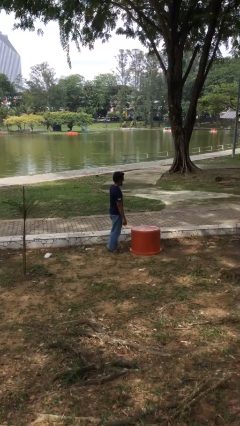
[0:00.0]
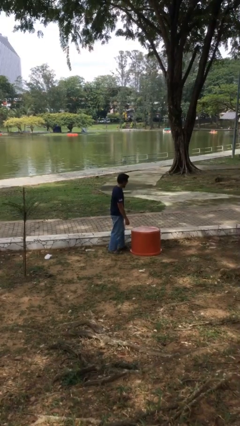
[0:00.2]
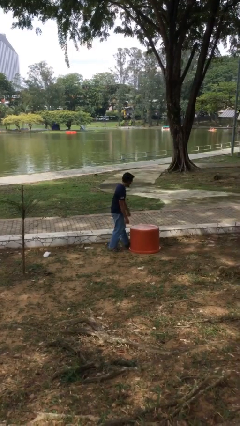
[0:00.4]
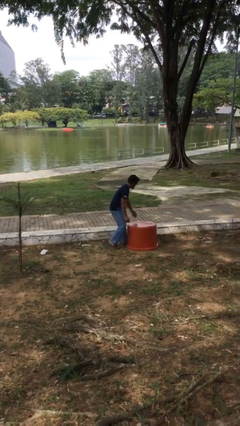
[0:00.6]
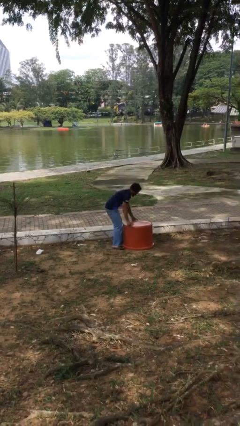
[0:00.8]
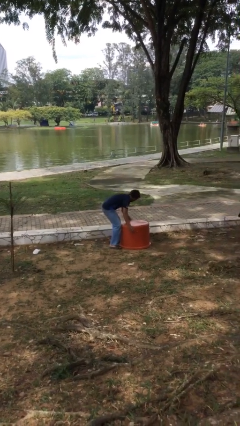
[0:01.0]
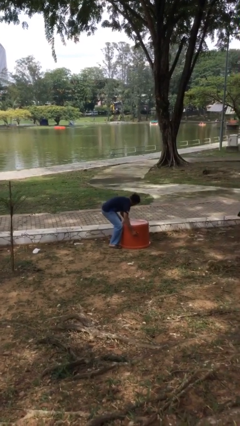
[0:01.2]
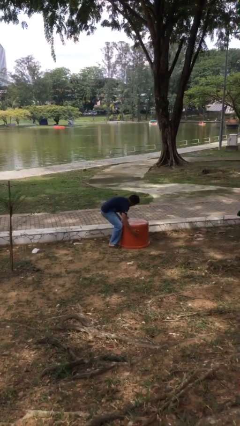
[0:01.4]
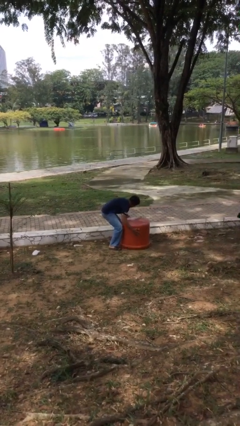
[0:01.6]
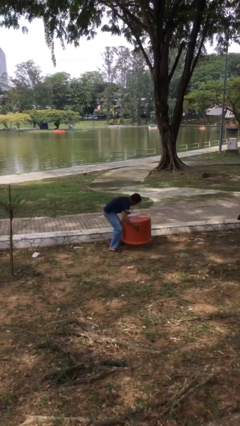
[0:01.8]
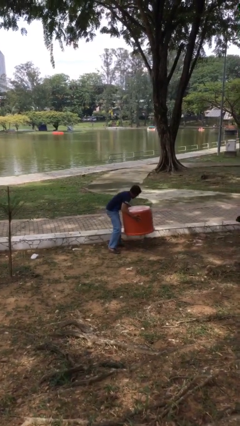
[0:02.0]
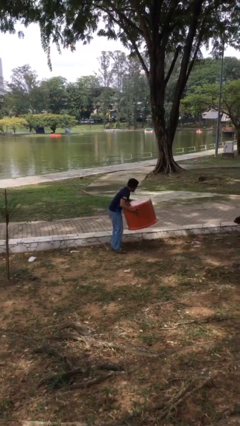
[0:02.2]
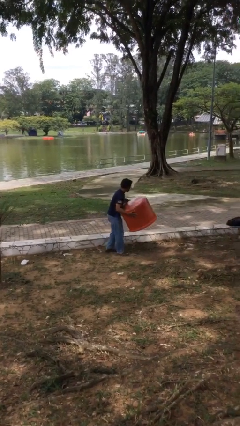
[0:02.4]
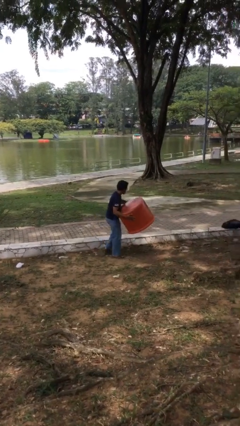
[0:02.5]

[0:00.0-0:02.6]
person picks up object from floor

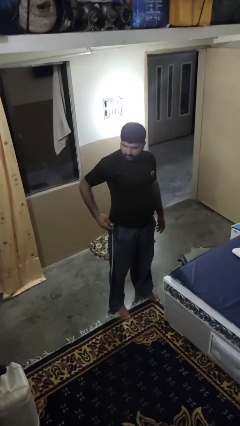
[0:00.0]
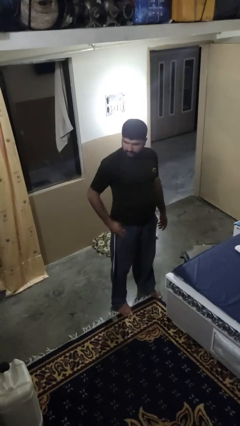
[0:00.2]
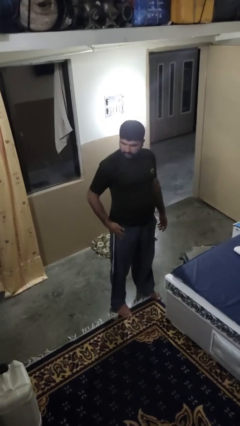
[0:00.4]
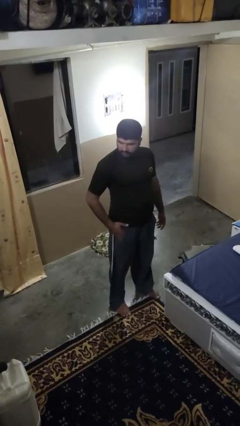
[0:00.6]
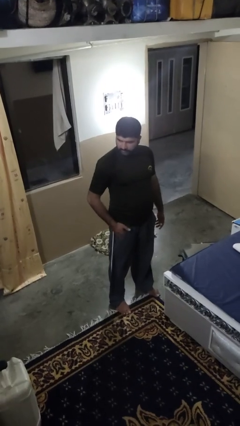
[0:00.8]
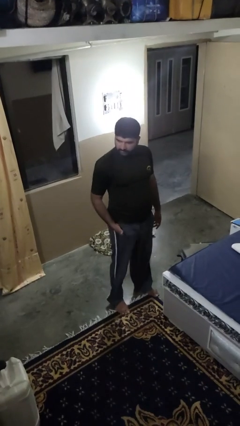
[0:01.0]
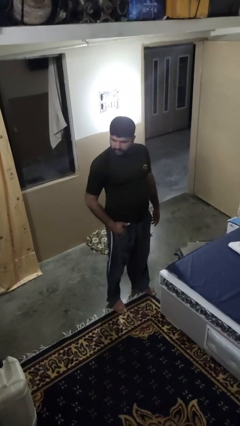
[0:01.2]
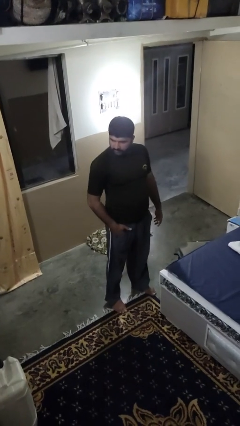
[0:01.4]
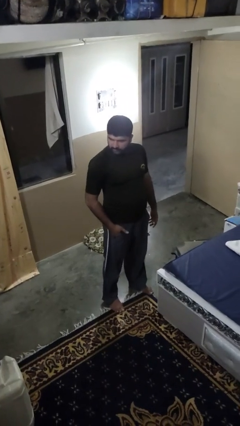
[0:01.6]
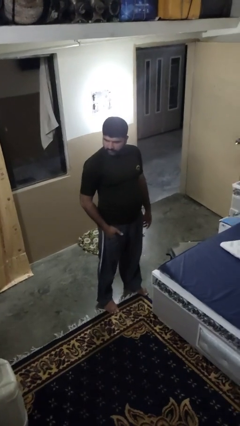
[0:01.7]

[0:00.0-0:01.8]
person puts hands in back pockets

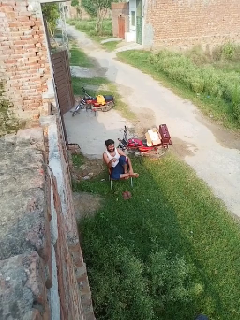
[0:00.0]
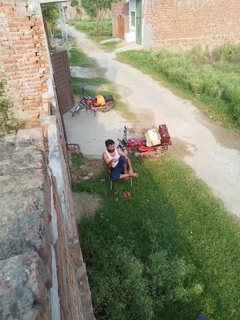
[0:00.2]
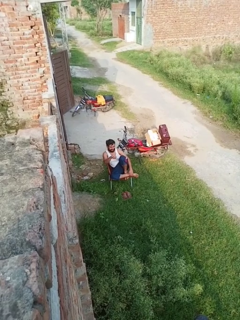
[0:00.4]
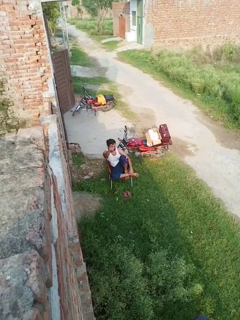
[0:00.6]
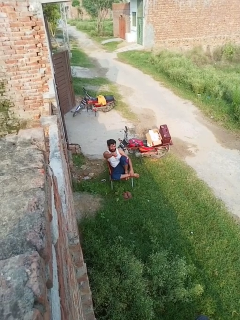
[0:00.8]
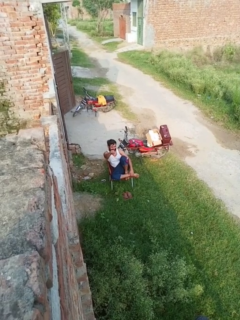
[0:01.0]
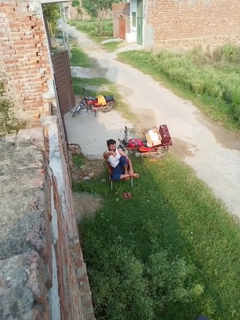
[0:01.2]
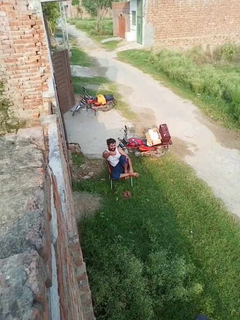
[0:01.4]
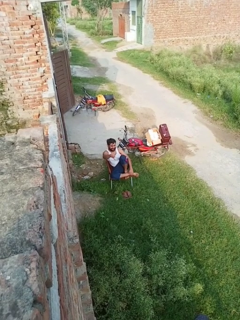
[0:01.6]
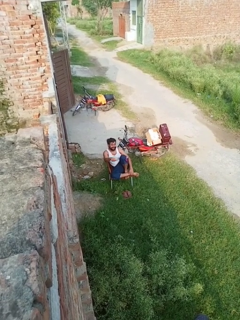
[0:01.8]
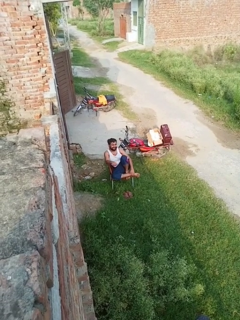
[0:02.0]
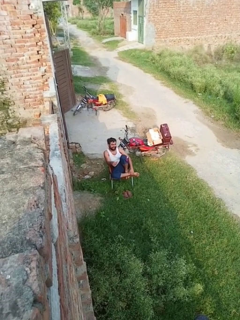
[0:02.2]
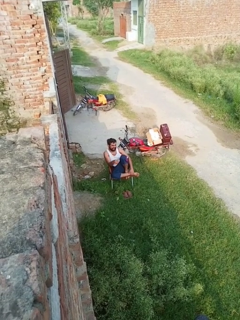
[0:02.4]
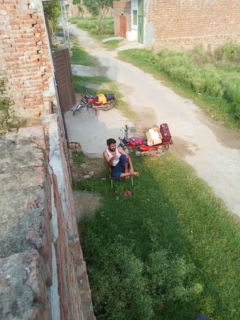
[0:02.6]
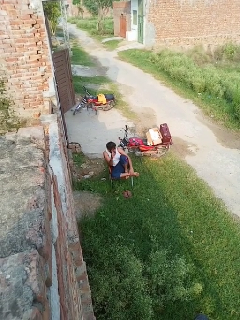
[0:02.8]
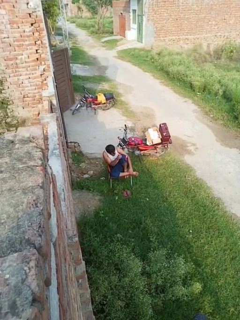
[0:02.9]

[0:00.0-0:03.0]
person gestures thumbs down

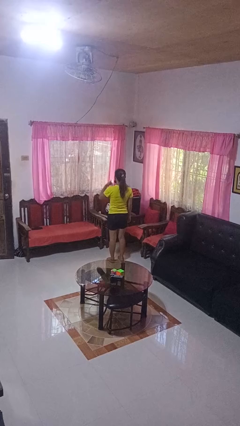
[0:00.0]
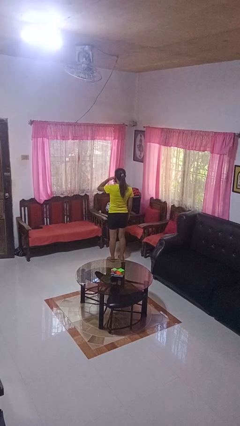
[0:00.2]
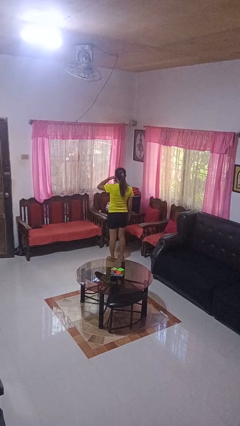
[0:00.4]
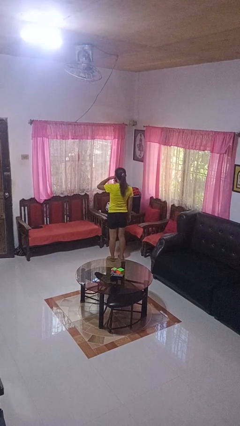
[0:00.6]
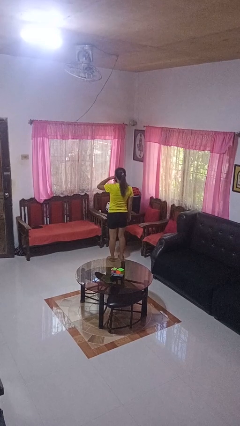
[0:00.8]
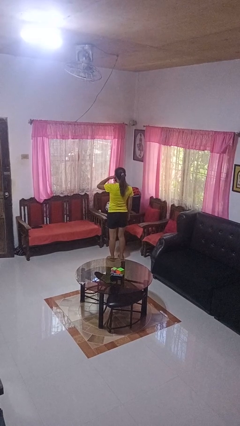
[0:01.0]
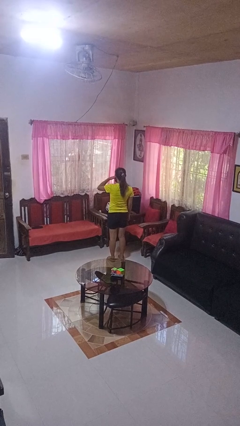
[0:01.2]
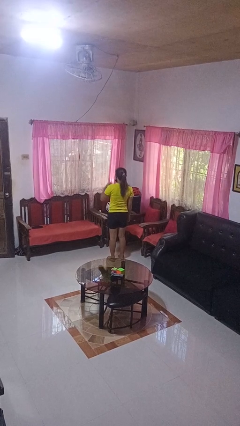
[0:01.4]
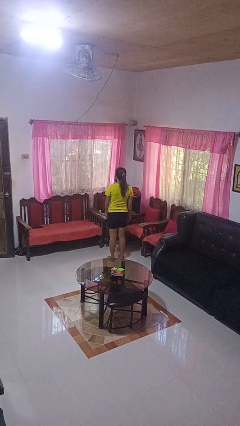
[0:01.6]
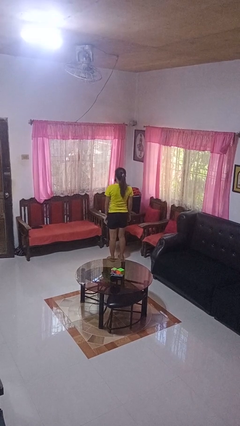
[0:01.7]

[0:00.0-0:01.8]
person gestures call me

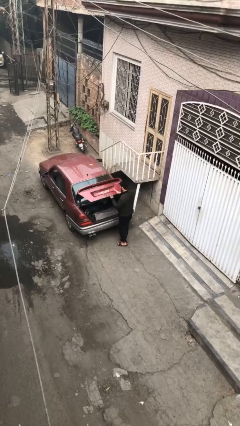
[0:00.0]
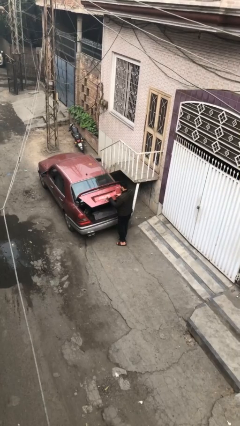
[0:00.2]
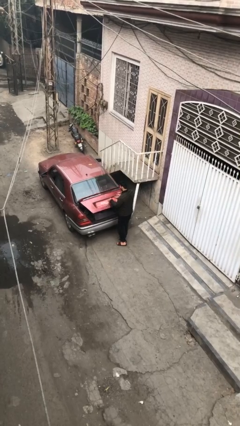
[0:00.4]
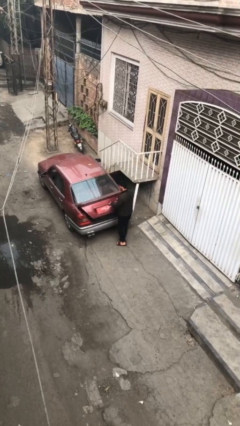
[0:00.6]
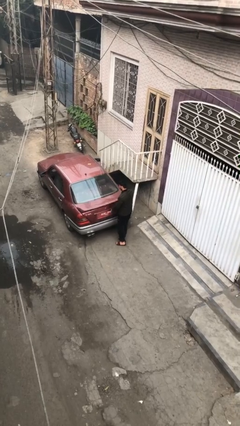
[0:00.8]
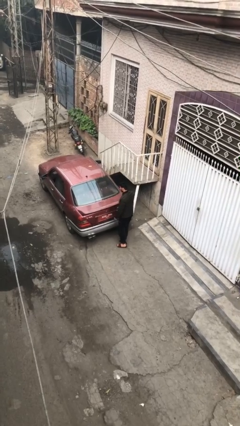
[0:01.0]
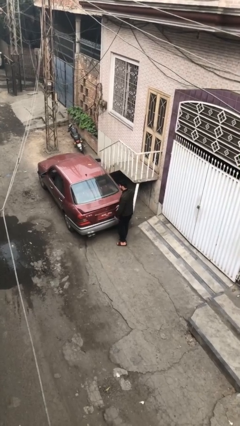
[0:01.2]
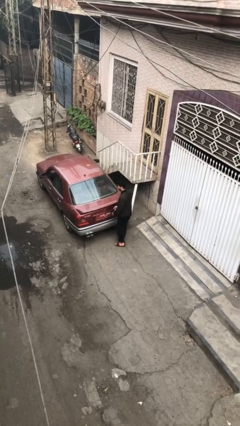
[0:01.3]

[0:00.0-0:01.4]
person closes car trunk

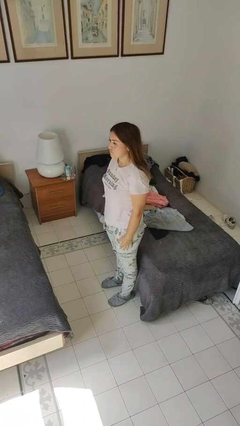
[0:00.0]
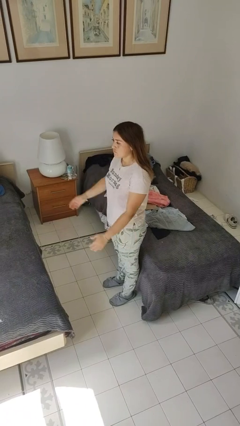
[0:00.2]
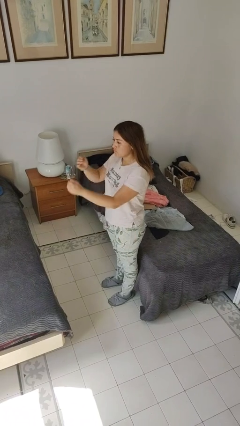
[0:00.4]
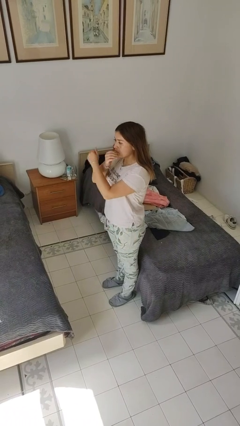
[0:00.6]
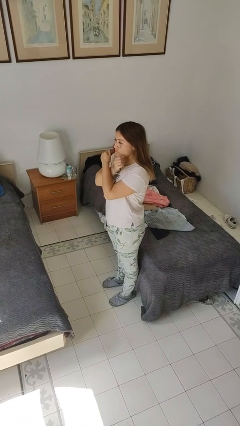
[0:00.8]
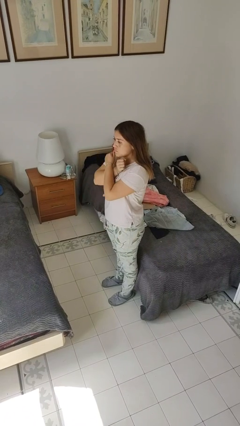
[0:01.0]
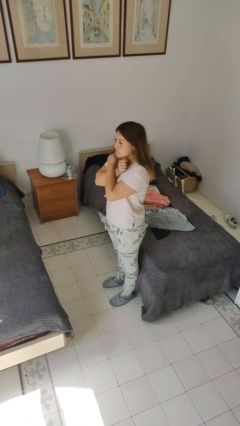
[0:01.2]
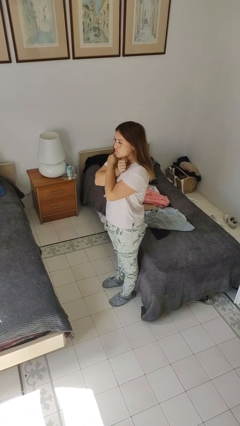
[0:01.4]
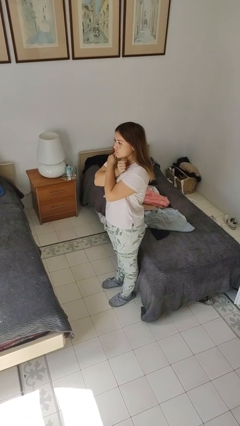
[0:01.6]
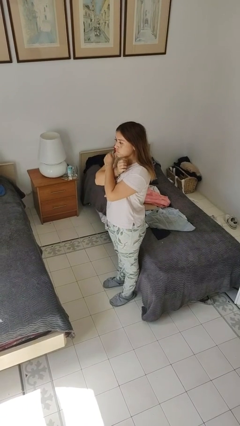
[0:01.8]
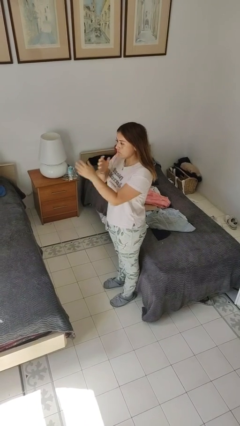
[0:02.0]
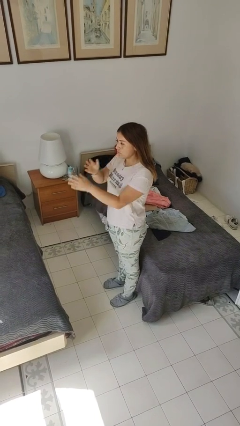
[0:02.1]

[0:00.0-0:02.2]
person gestures arms x

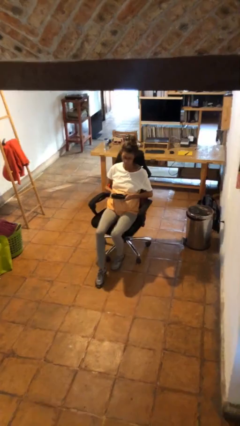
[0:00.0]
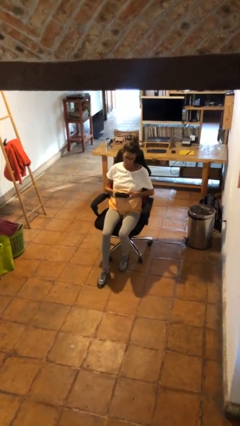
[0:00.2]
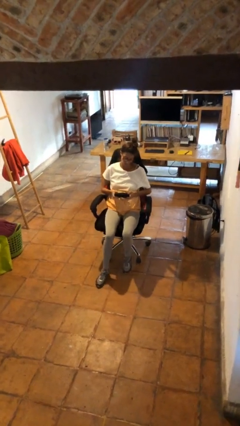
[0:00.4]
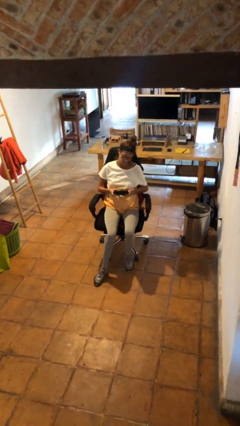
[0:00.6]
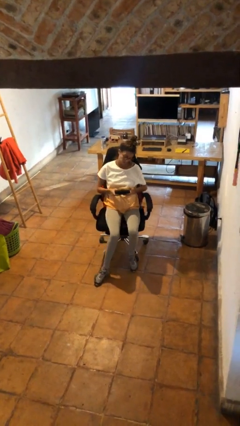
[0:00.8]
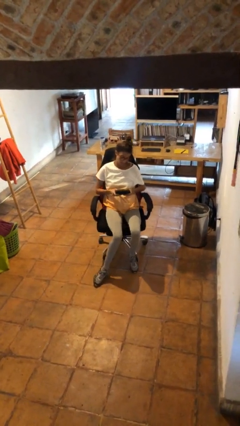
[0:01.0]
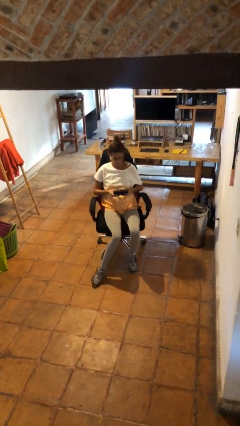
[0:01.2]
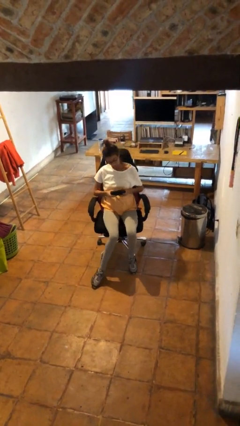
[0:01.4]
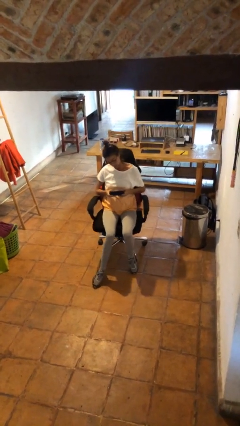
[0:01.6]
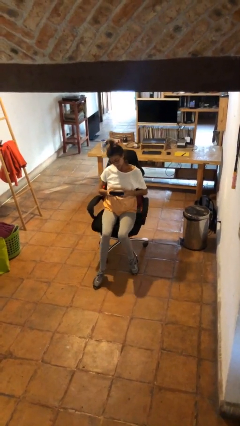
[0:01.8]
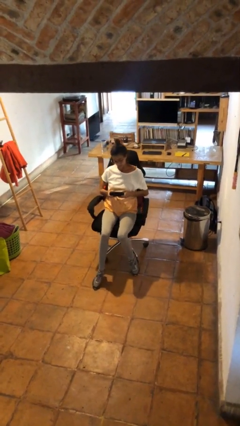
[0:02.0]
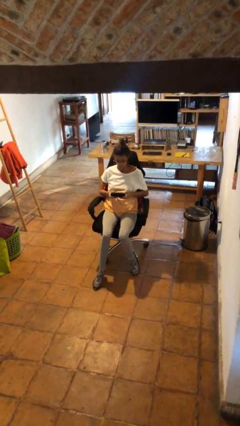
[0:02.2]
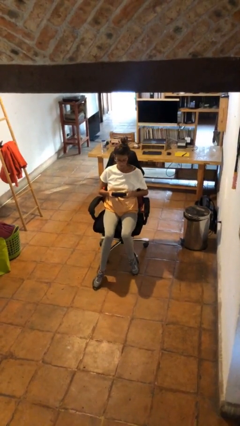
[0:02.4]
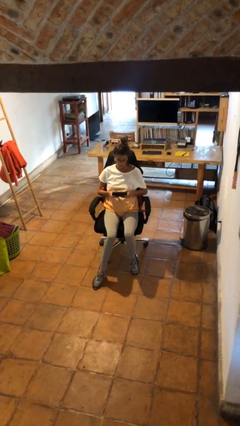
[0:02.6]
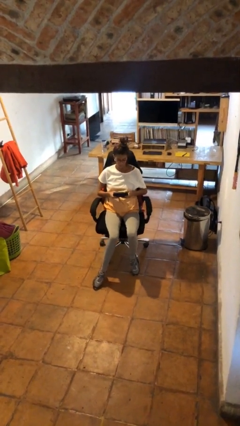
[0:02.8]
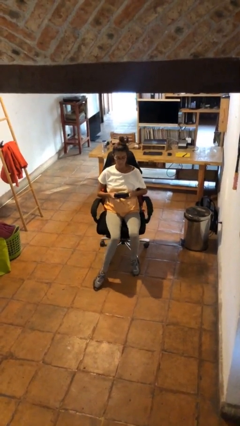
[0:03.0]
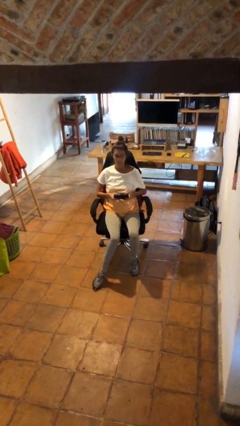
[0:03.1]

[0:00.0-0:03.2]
person interacts with handheld game

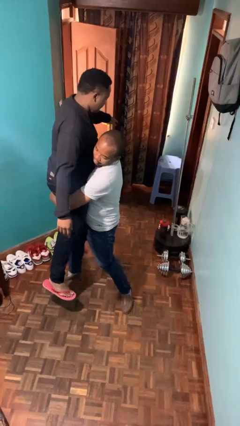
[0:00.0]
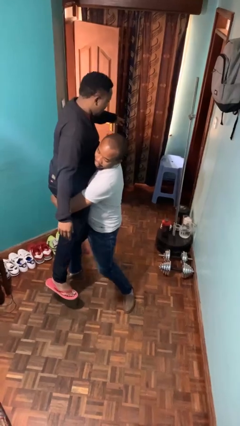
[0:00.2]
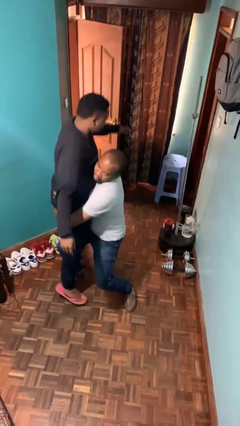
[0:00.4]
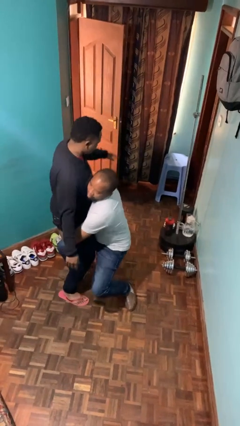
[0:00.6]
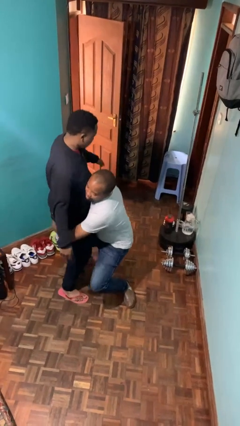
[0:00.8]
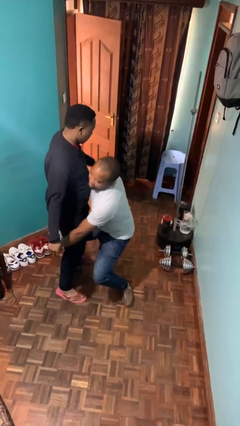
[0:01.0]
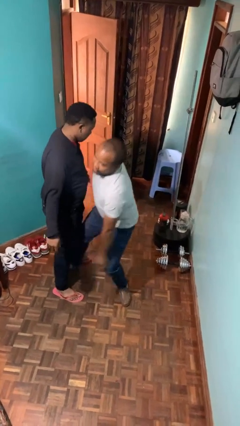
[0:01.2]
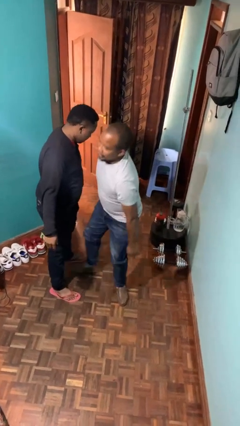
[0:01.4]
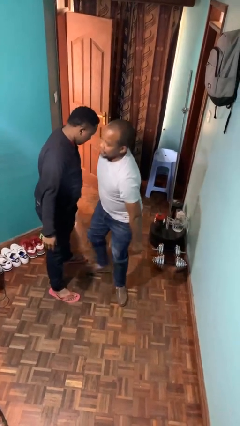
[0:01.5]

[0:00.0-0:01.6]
person puts down person
